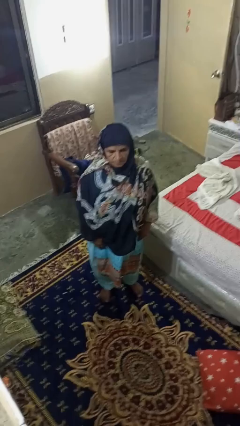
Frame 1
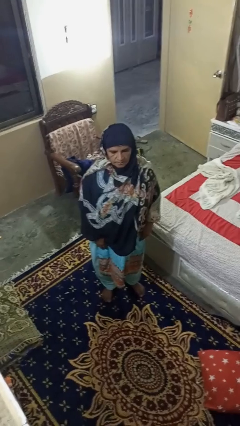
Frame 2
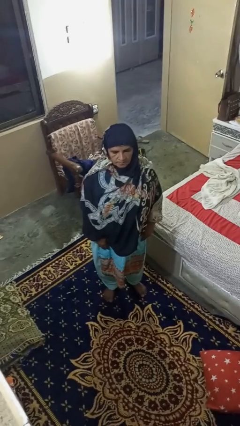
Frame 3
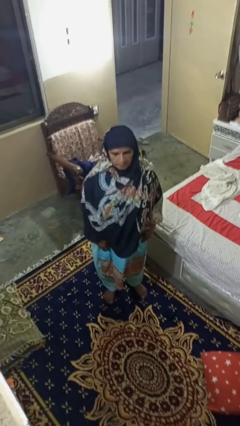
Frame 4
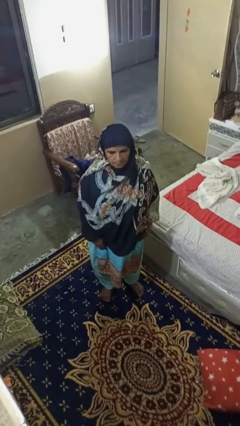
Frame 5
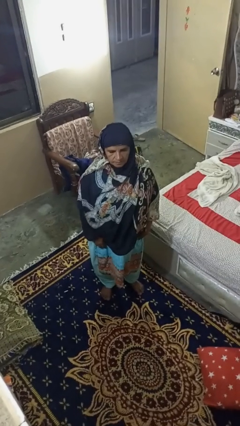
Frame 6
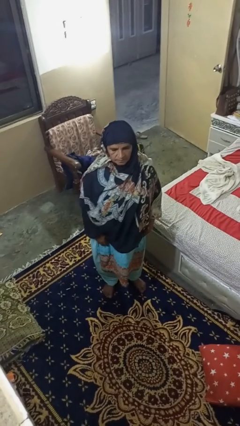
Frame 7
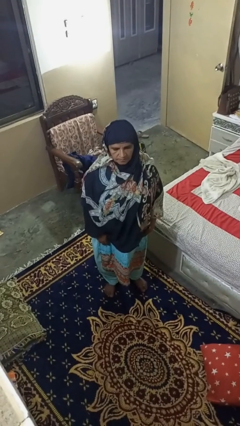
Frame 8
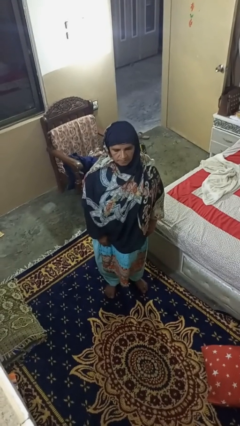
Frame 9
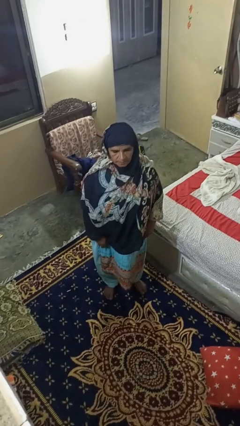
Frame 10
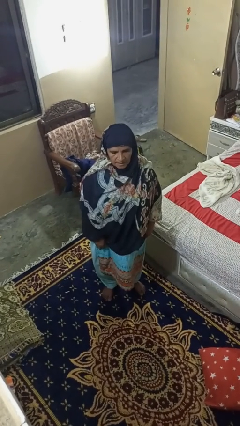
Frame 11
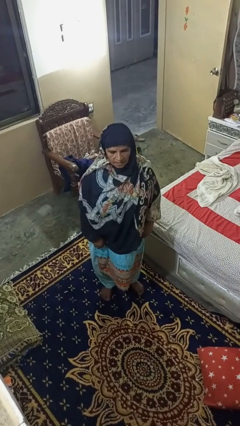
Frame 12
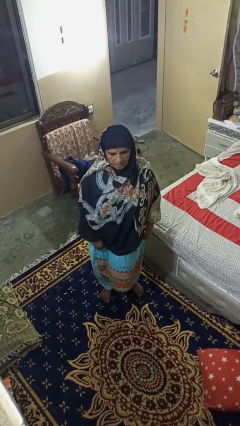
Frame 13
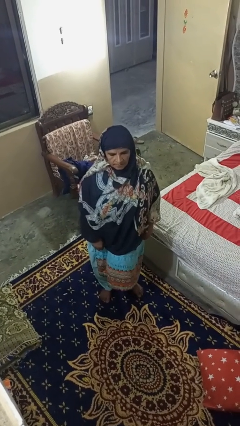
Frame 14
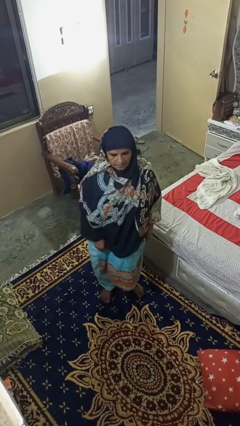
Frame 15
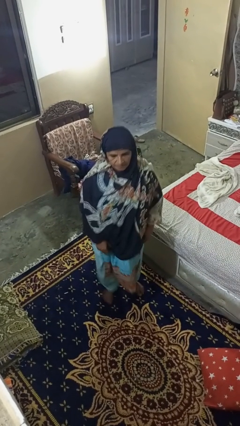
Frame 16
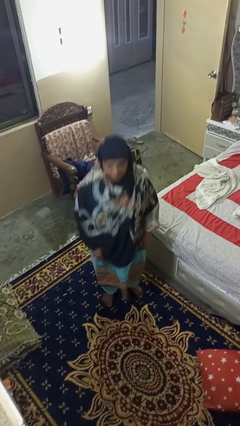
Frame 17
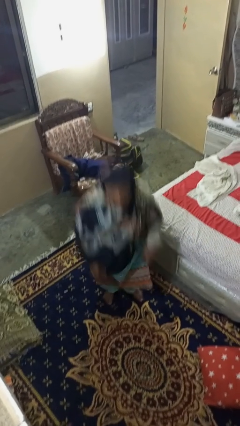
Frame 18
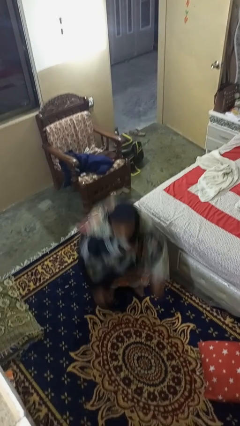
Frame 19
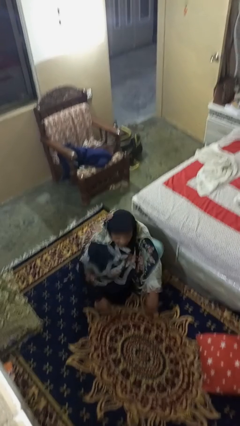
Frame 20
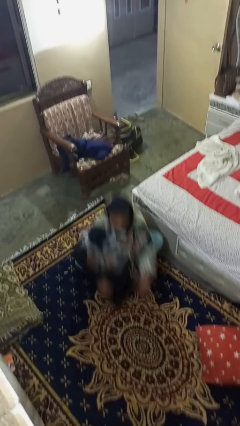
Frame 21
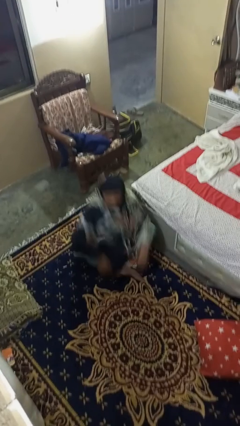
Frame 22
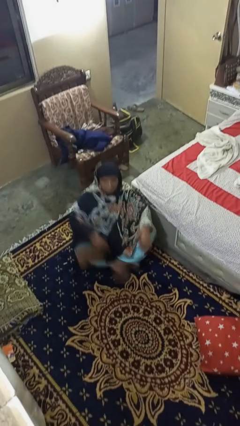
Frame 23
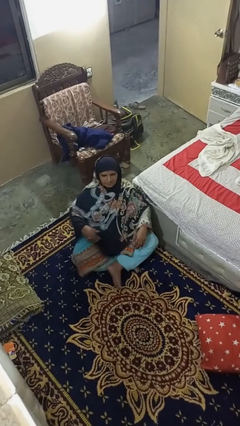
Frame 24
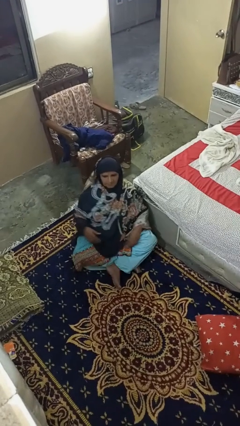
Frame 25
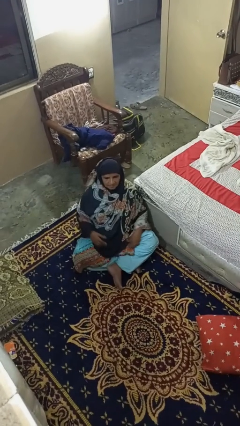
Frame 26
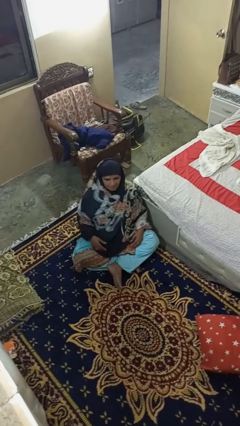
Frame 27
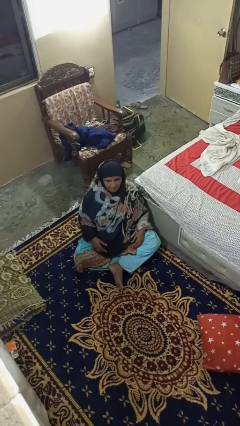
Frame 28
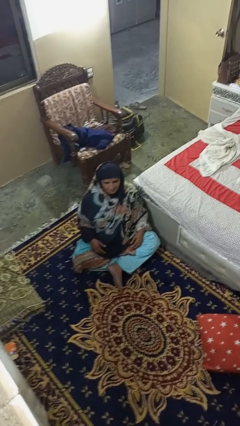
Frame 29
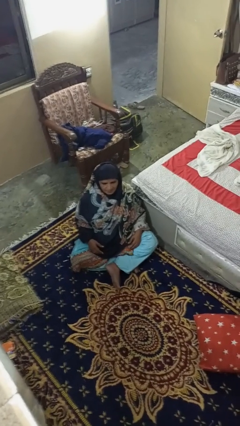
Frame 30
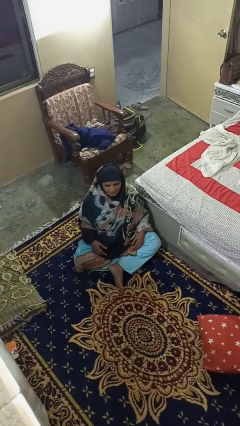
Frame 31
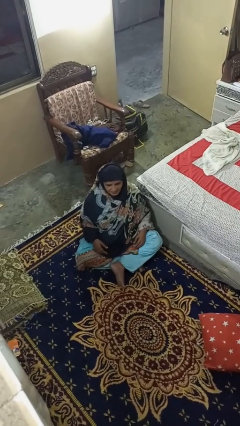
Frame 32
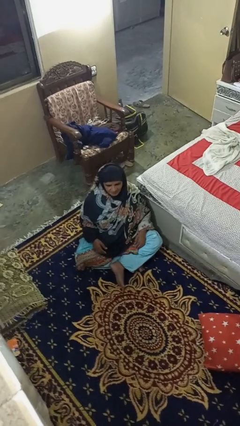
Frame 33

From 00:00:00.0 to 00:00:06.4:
person sits crisscross

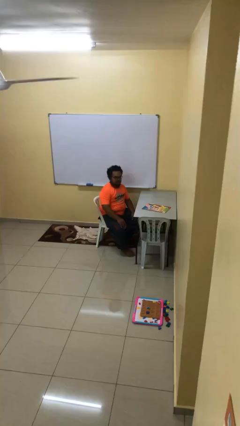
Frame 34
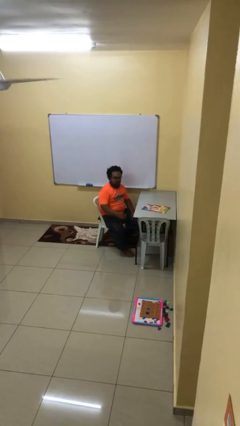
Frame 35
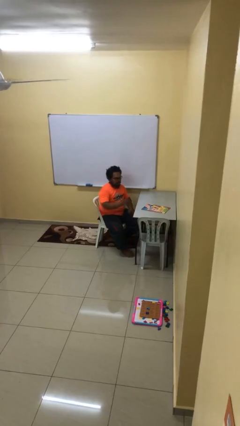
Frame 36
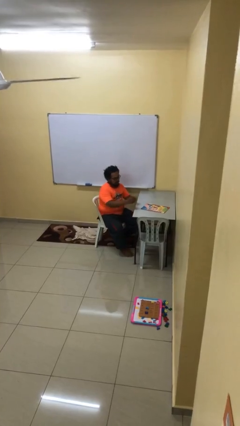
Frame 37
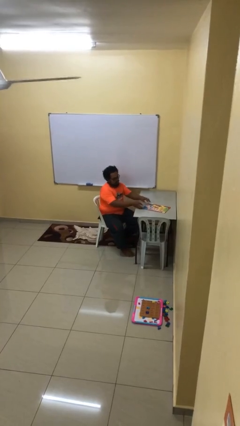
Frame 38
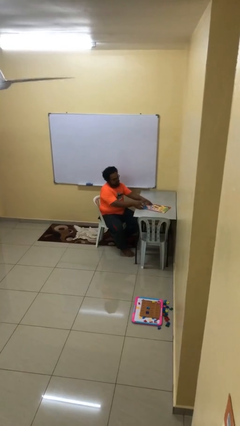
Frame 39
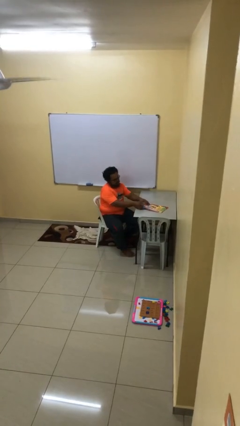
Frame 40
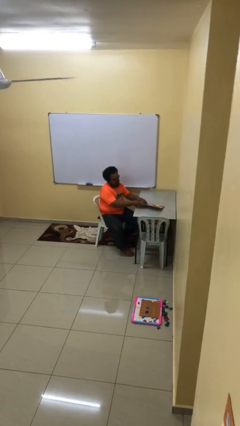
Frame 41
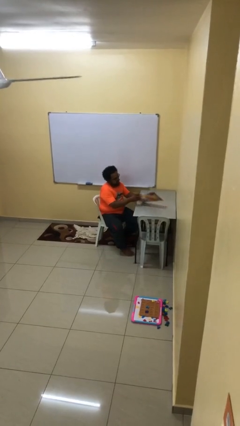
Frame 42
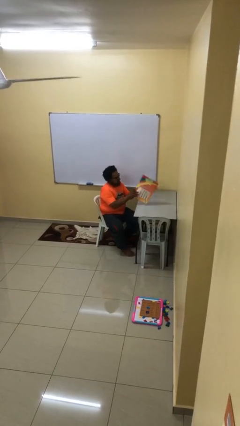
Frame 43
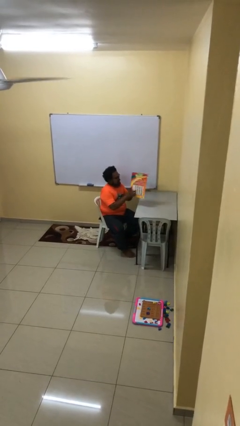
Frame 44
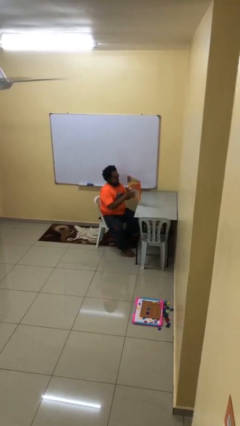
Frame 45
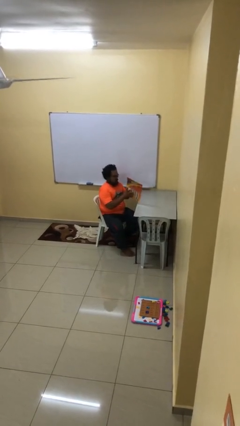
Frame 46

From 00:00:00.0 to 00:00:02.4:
person picks up object from table

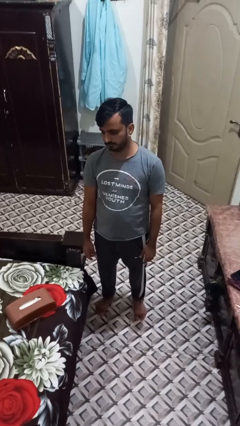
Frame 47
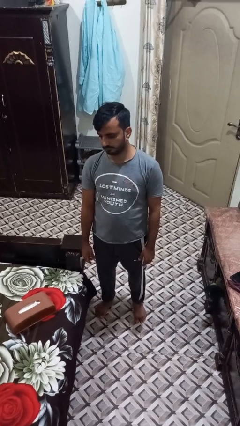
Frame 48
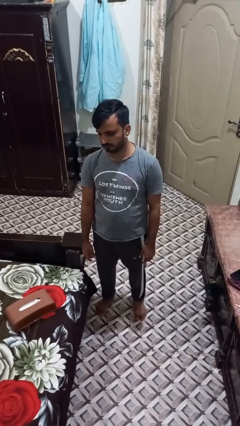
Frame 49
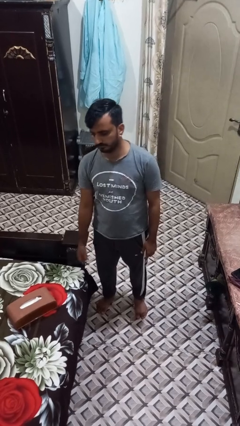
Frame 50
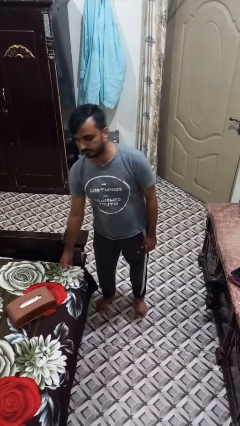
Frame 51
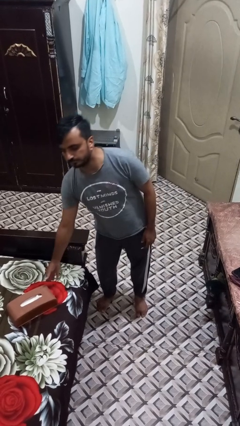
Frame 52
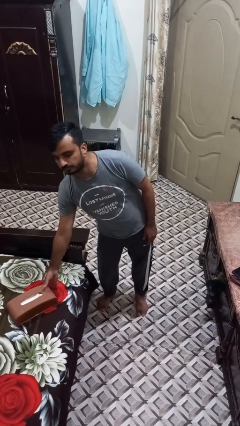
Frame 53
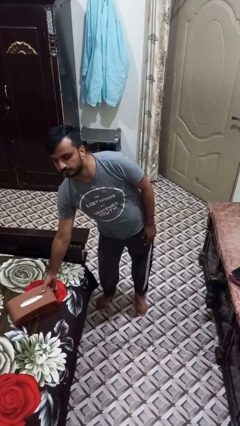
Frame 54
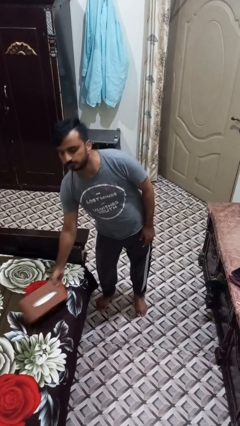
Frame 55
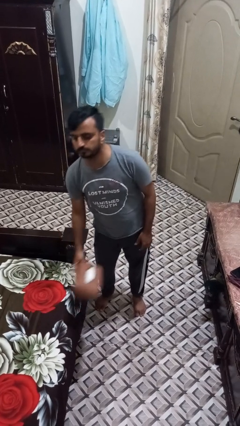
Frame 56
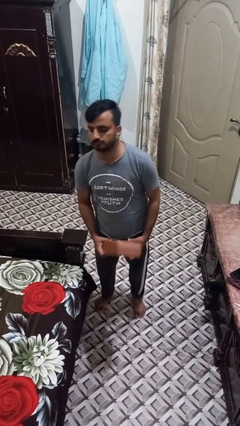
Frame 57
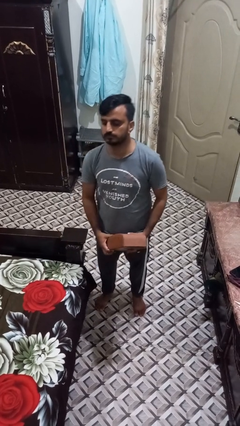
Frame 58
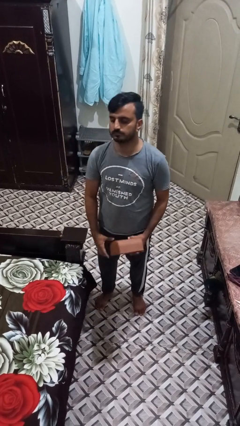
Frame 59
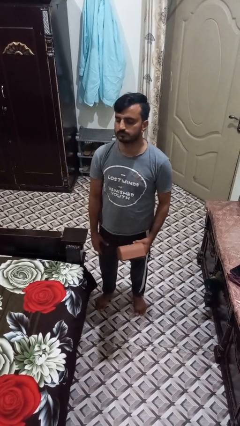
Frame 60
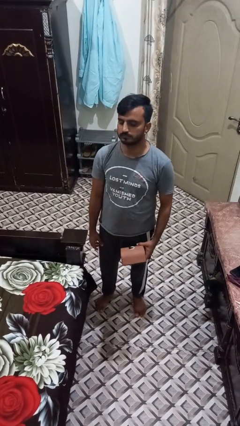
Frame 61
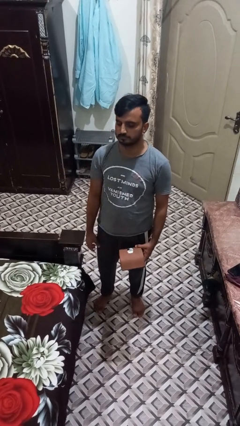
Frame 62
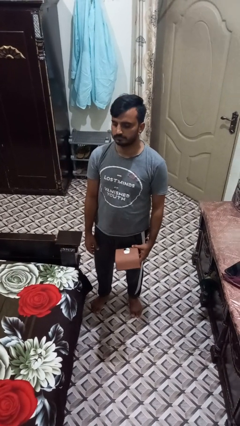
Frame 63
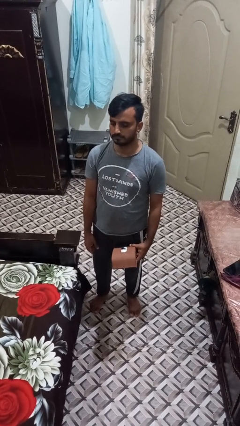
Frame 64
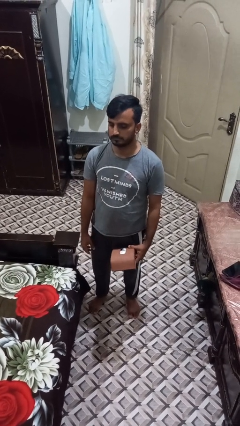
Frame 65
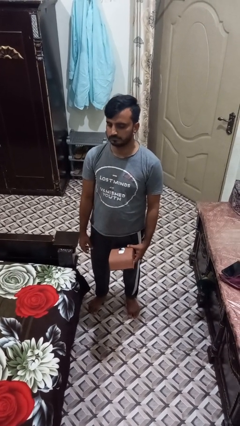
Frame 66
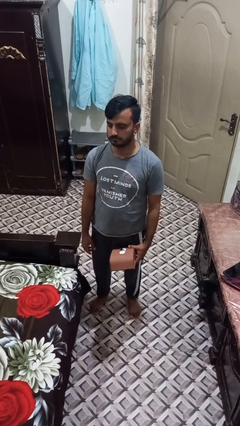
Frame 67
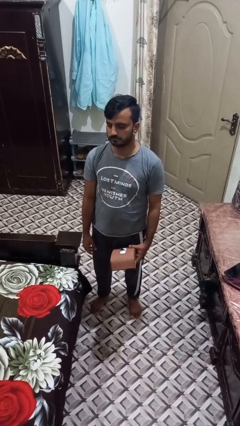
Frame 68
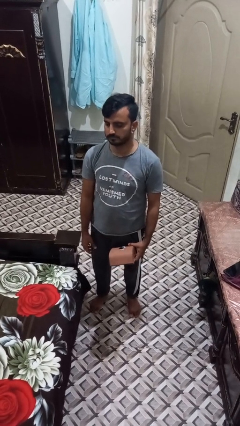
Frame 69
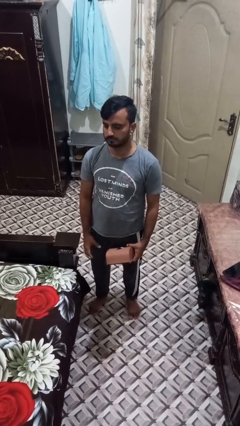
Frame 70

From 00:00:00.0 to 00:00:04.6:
person picks up object from bed

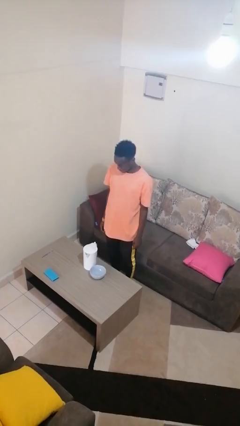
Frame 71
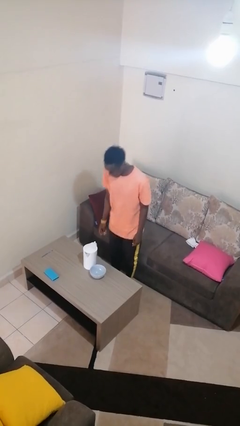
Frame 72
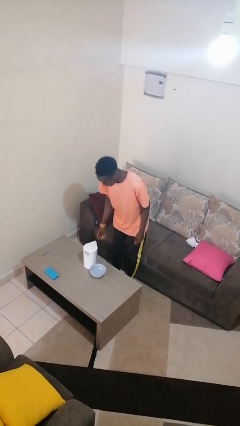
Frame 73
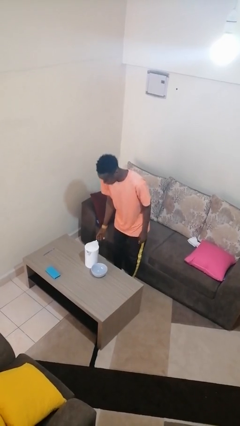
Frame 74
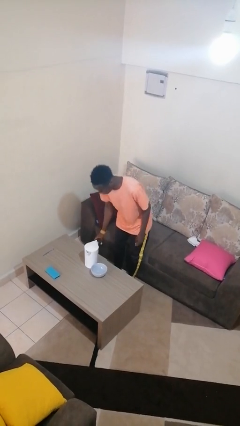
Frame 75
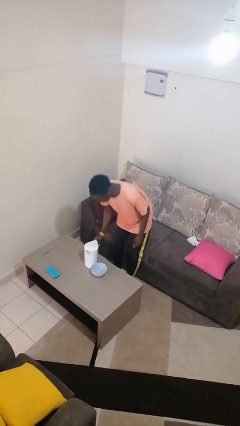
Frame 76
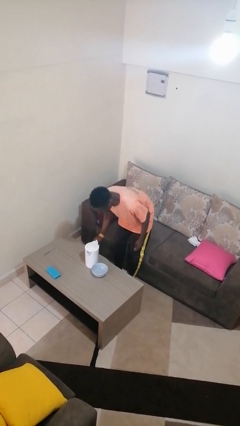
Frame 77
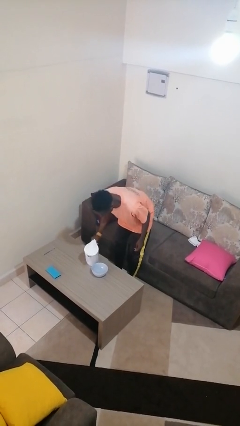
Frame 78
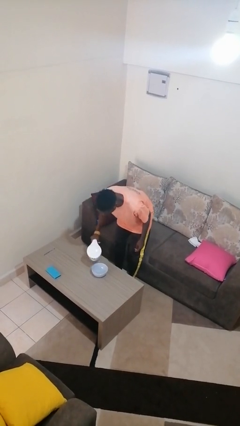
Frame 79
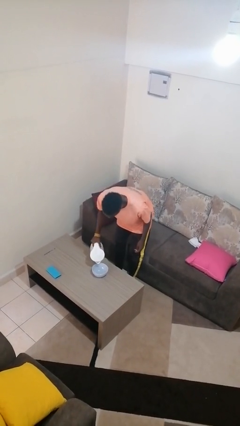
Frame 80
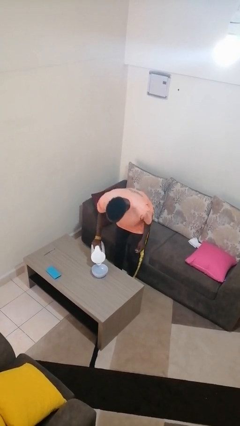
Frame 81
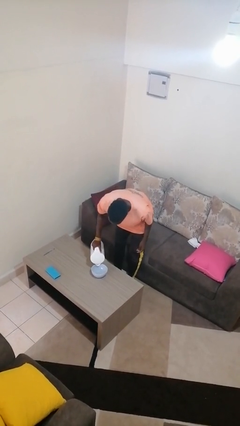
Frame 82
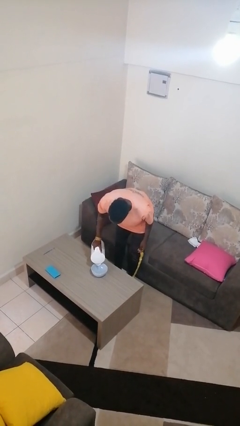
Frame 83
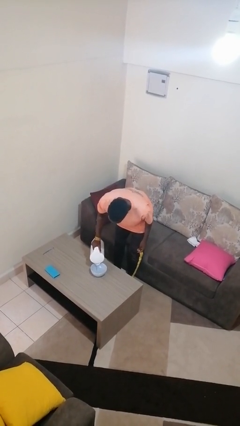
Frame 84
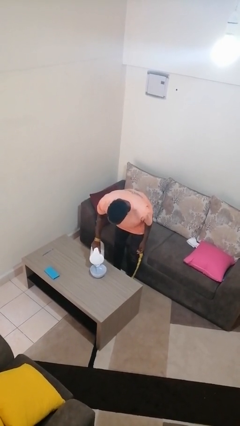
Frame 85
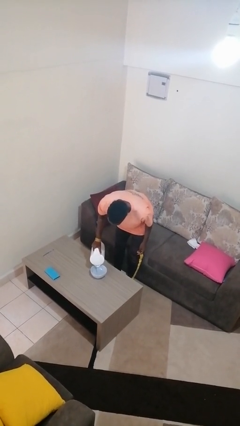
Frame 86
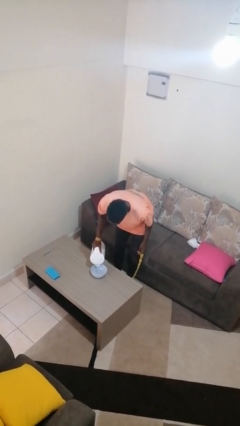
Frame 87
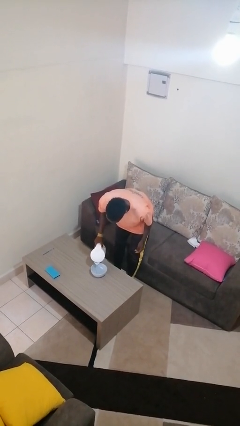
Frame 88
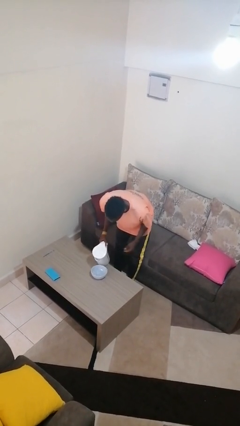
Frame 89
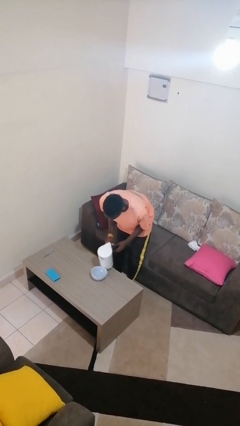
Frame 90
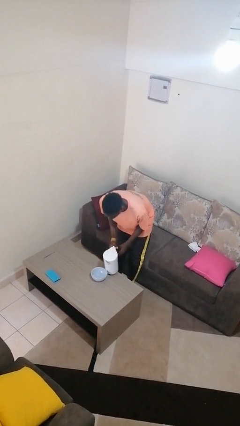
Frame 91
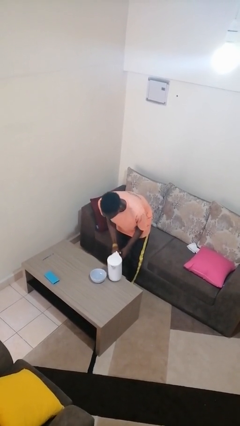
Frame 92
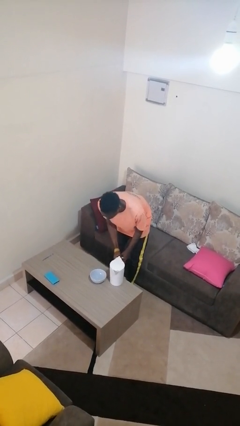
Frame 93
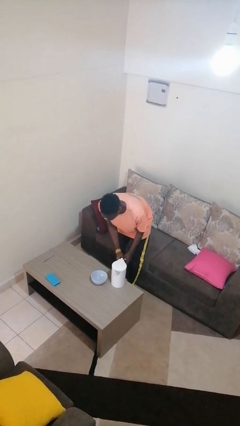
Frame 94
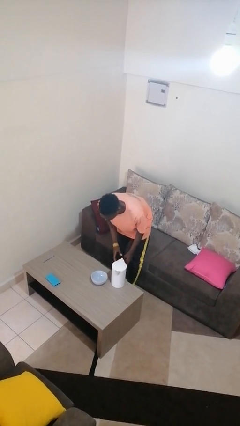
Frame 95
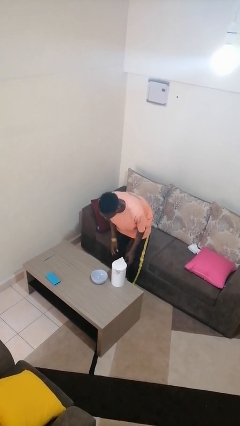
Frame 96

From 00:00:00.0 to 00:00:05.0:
person pours into bowl
